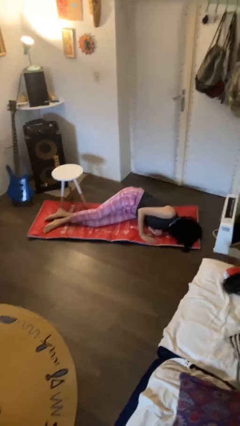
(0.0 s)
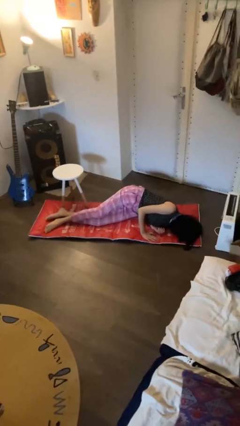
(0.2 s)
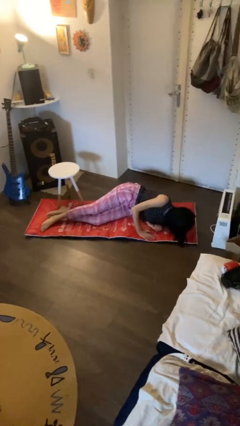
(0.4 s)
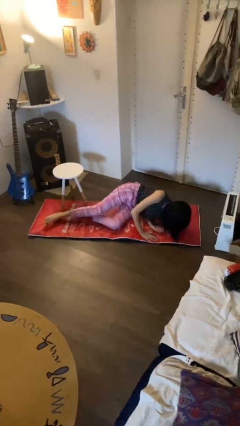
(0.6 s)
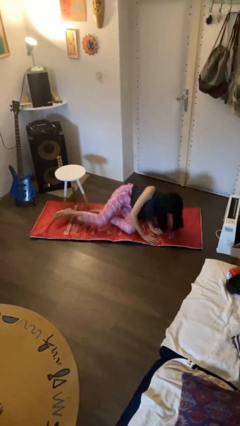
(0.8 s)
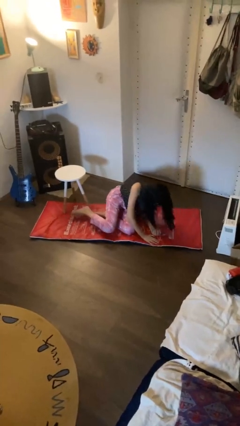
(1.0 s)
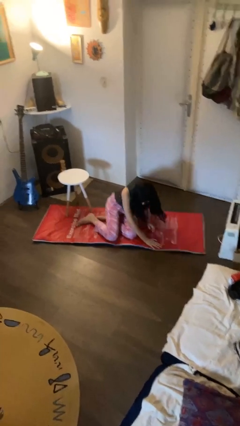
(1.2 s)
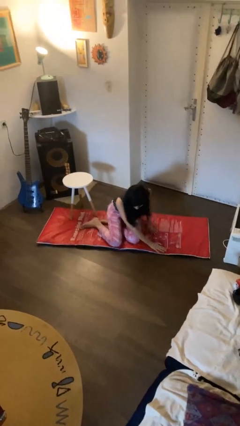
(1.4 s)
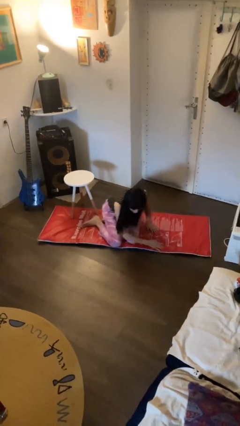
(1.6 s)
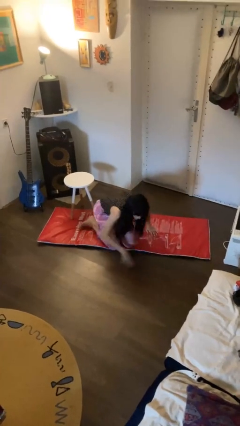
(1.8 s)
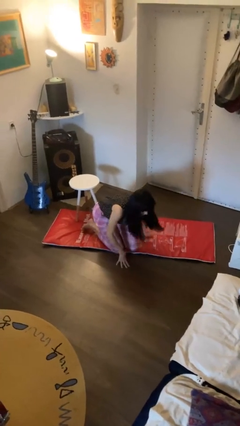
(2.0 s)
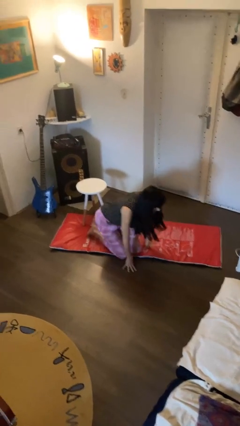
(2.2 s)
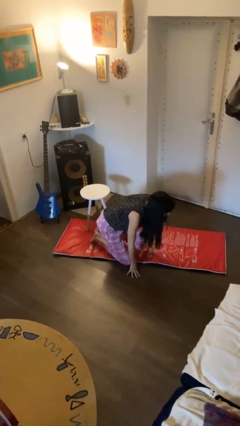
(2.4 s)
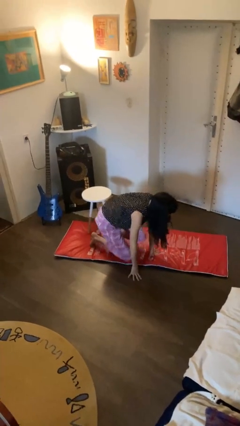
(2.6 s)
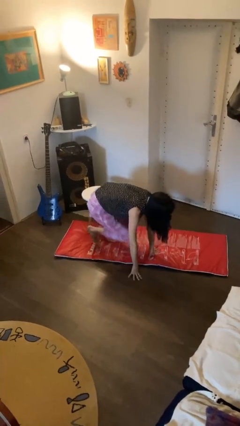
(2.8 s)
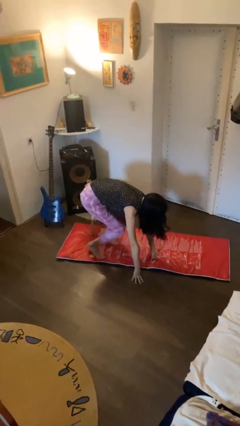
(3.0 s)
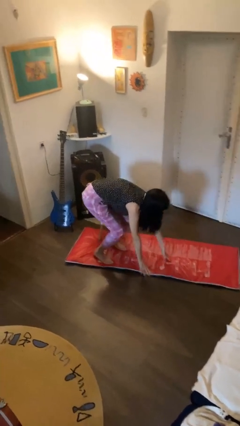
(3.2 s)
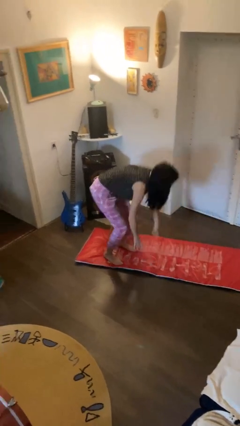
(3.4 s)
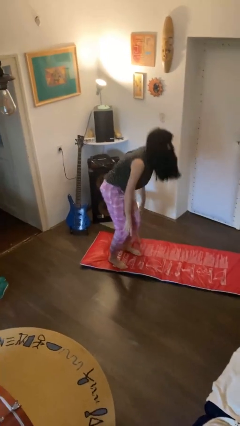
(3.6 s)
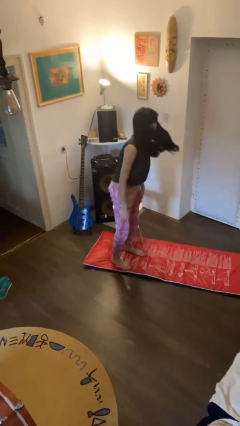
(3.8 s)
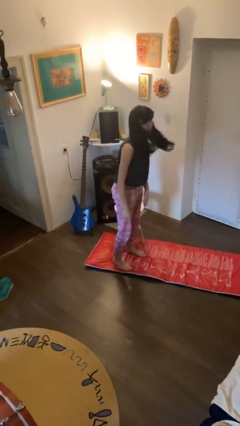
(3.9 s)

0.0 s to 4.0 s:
person stands up from floor

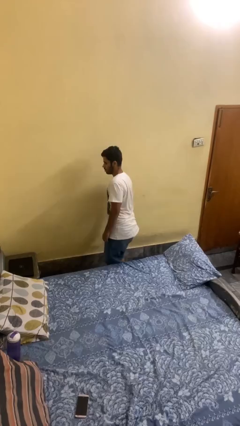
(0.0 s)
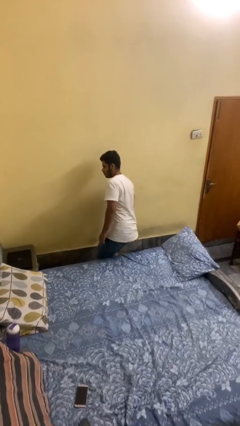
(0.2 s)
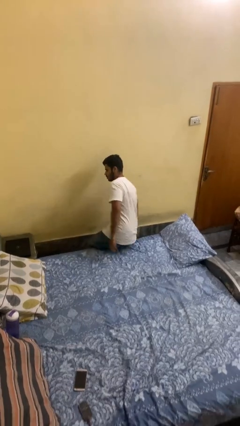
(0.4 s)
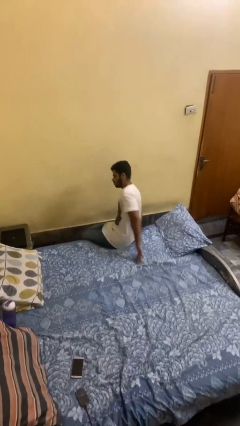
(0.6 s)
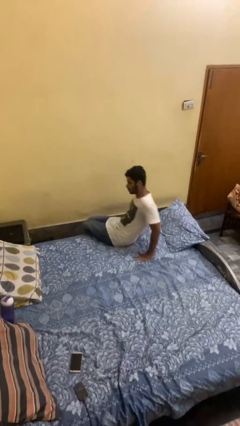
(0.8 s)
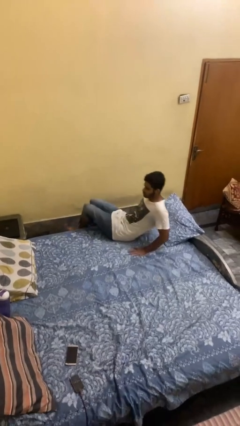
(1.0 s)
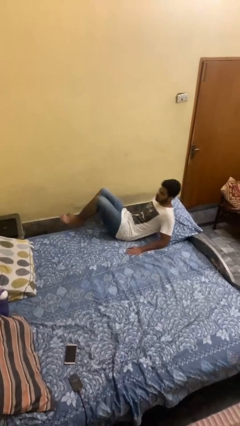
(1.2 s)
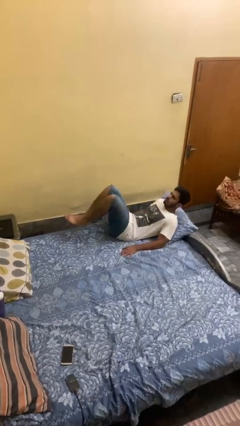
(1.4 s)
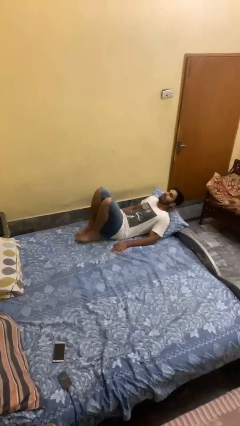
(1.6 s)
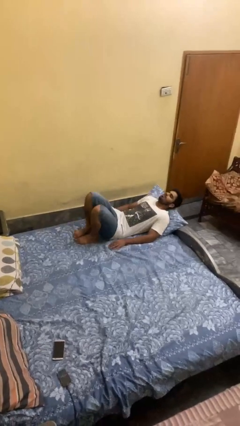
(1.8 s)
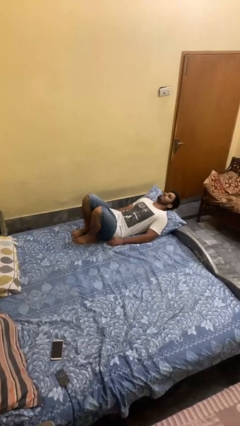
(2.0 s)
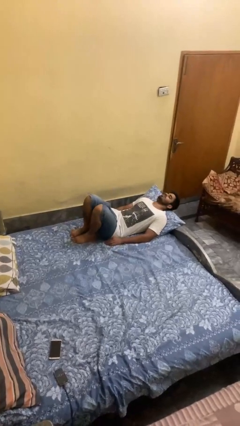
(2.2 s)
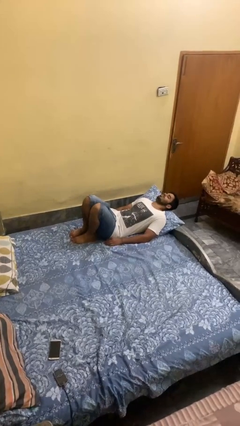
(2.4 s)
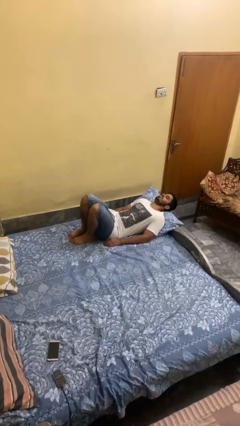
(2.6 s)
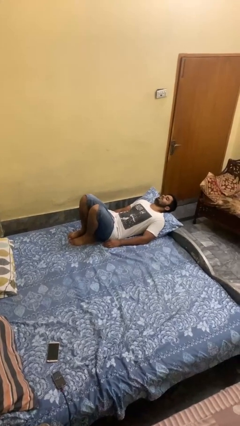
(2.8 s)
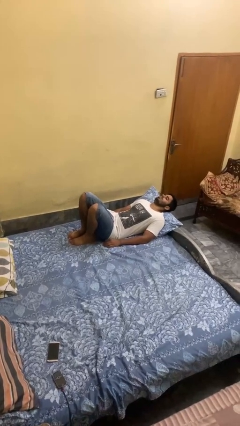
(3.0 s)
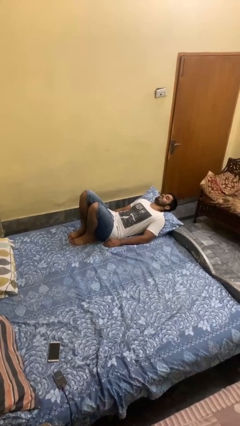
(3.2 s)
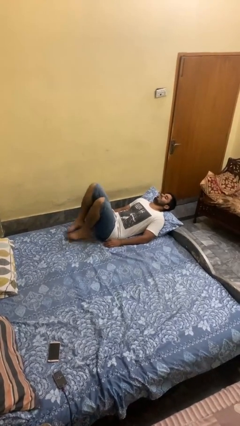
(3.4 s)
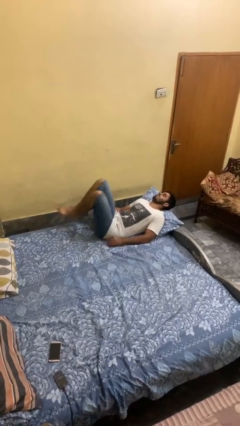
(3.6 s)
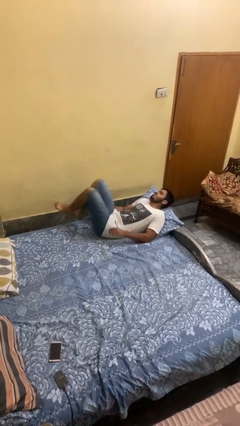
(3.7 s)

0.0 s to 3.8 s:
person lies down on bed

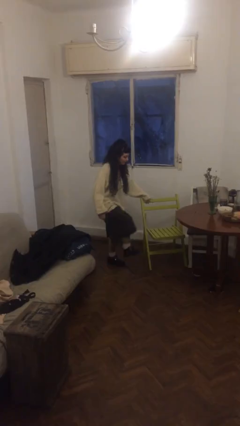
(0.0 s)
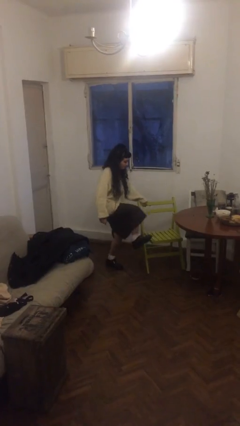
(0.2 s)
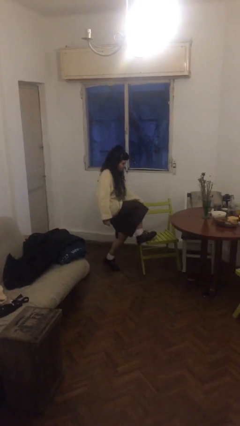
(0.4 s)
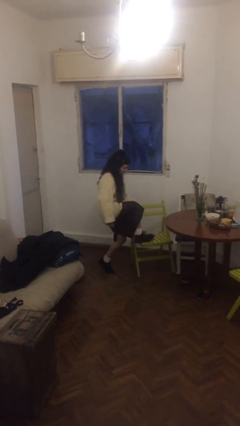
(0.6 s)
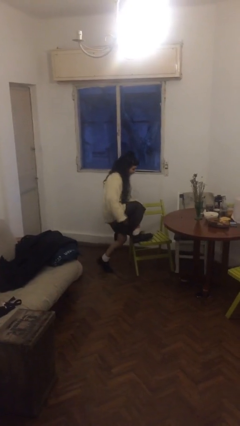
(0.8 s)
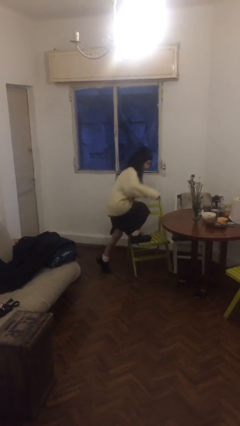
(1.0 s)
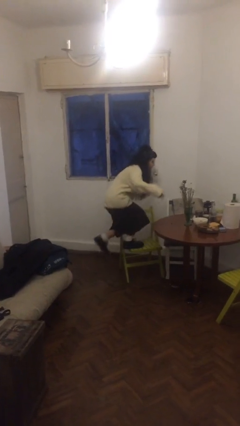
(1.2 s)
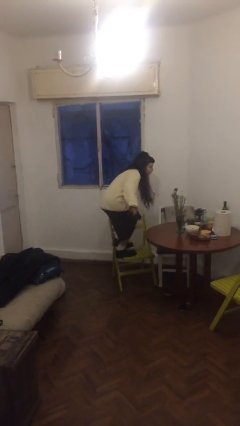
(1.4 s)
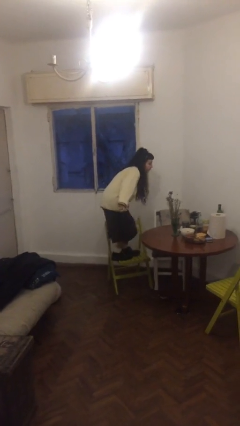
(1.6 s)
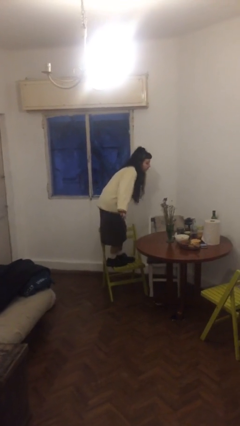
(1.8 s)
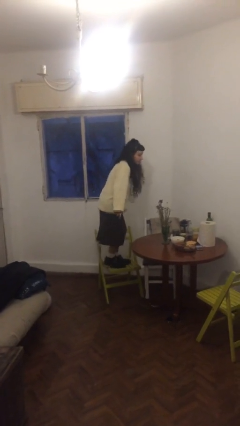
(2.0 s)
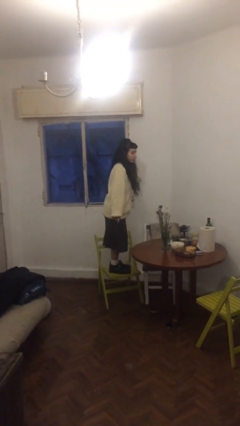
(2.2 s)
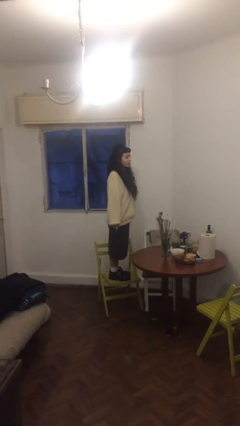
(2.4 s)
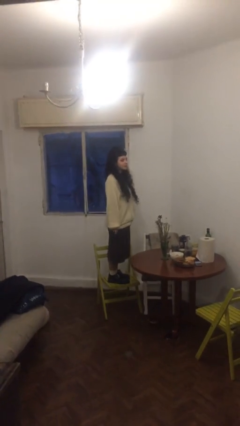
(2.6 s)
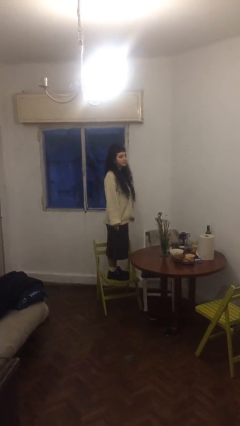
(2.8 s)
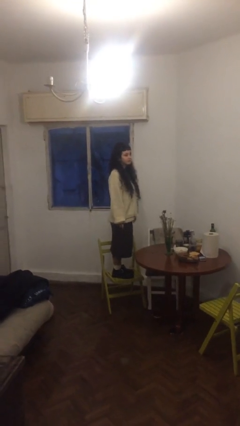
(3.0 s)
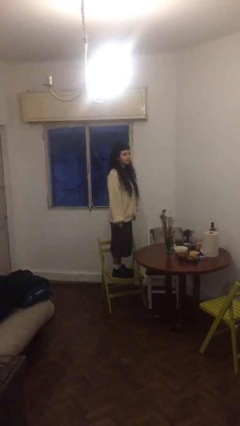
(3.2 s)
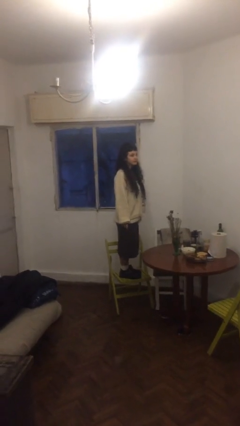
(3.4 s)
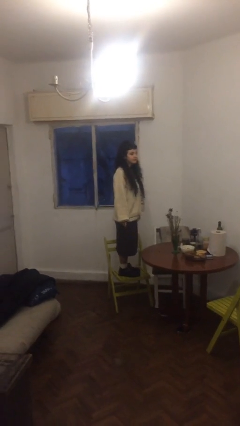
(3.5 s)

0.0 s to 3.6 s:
person climbs on chair

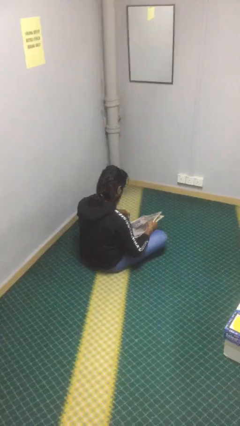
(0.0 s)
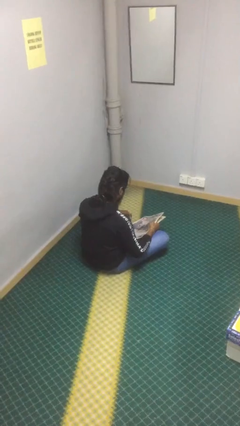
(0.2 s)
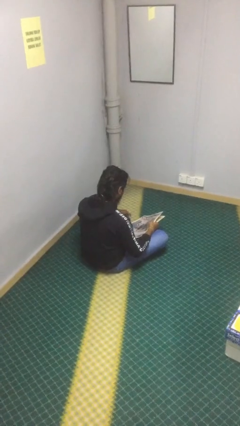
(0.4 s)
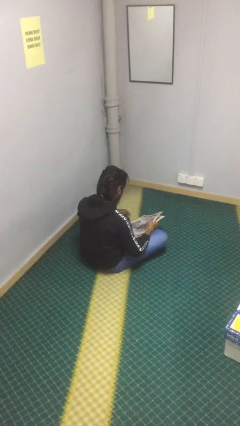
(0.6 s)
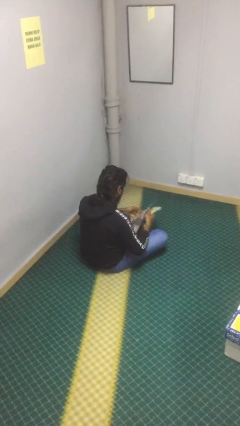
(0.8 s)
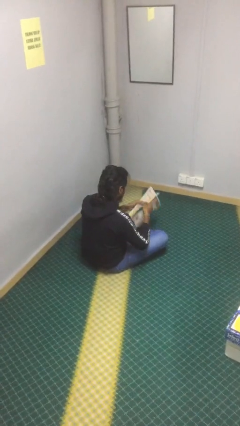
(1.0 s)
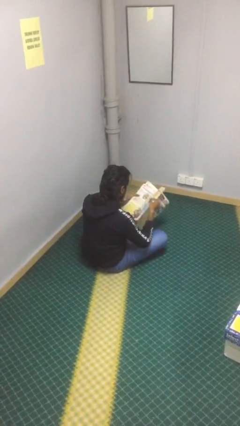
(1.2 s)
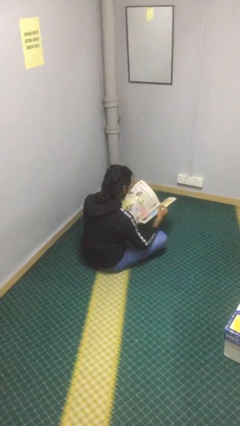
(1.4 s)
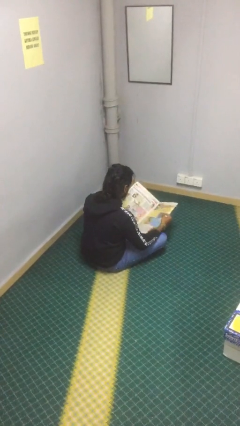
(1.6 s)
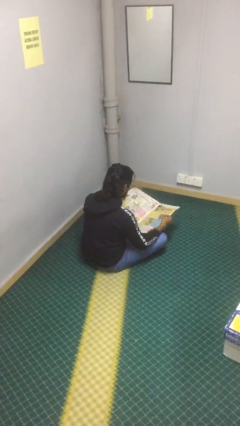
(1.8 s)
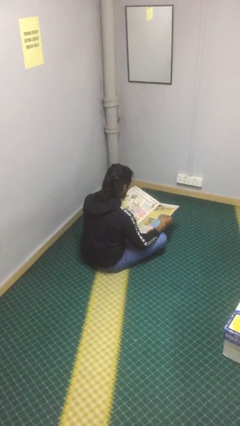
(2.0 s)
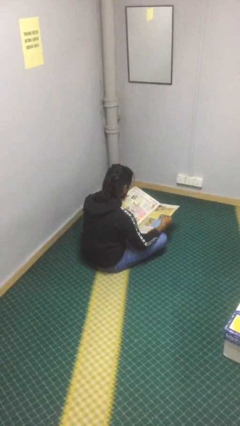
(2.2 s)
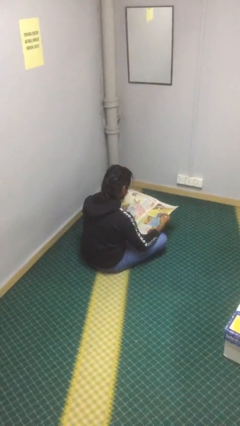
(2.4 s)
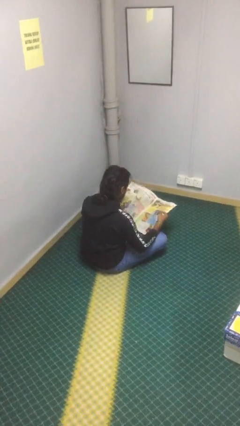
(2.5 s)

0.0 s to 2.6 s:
person reads newspaper

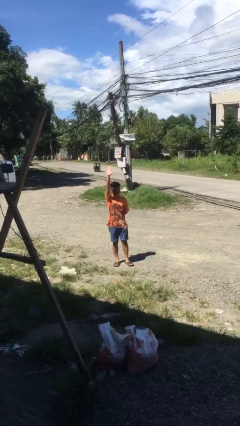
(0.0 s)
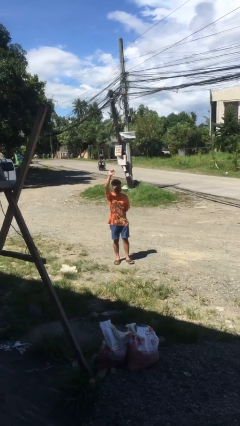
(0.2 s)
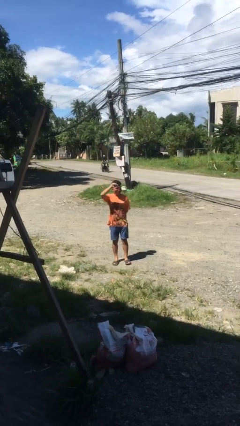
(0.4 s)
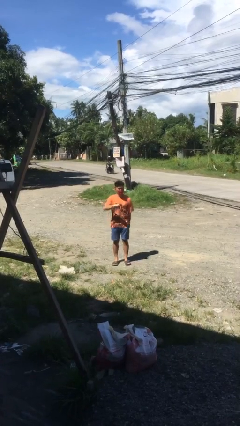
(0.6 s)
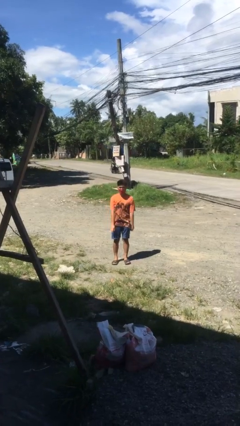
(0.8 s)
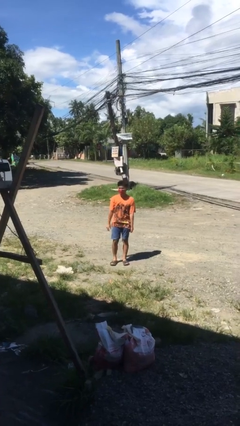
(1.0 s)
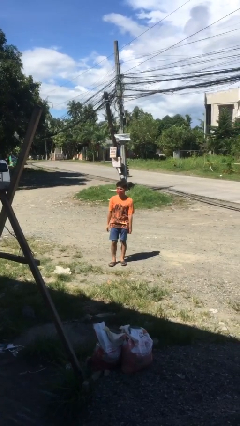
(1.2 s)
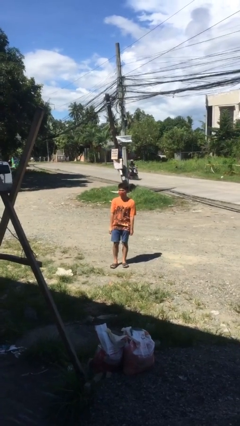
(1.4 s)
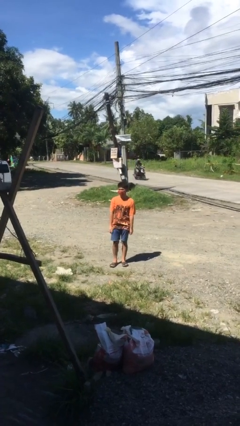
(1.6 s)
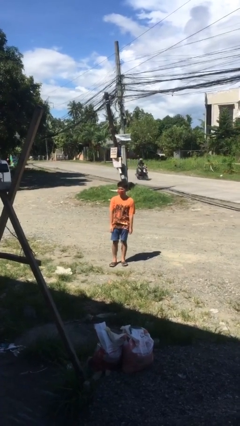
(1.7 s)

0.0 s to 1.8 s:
person gestures lower hand

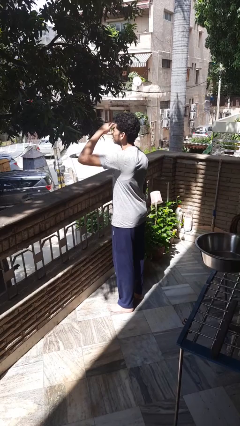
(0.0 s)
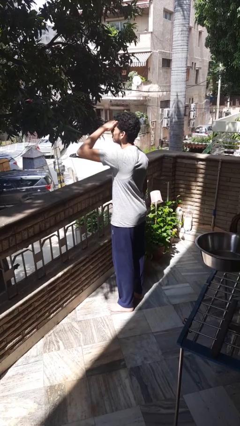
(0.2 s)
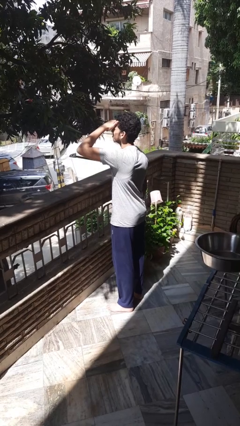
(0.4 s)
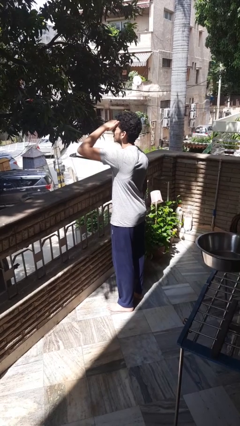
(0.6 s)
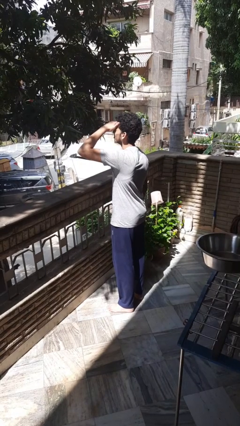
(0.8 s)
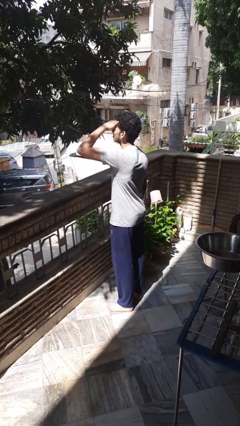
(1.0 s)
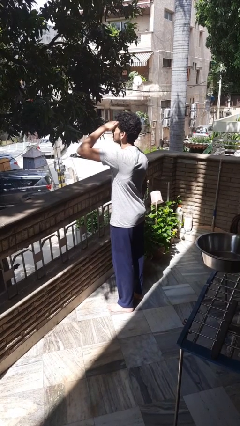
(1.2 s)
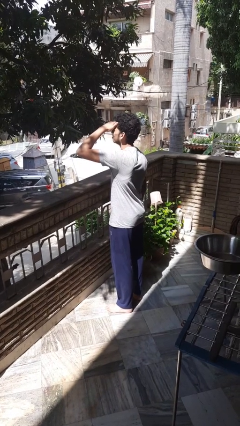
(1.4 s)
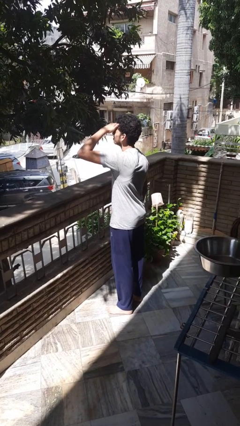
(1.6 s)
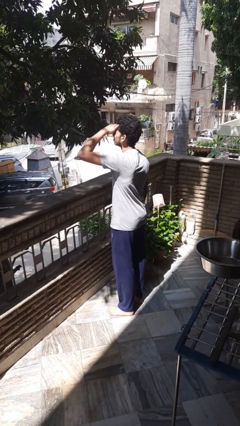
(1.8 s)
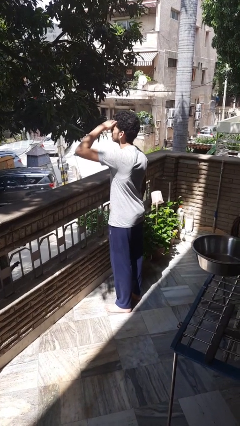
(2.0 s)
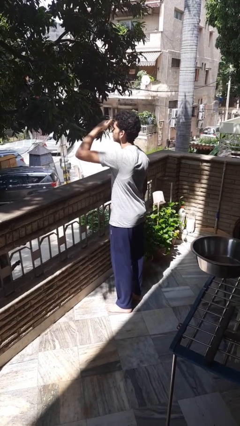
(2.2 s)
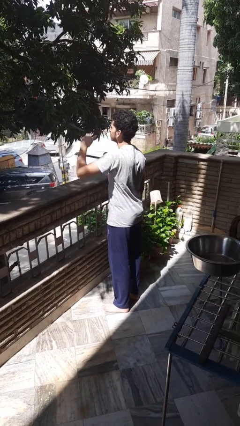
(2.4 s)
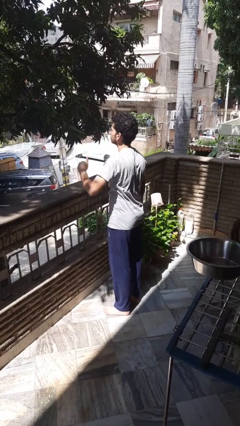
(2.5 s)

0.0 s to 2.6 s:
person shades eyes
